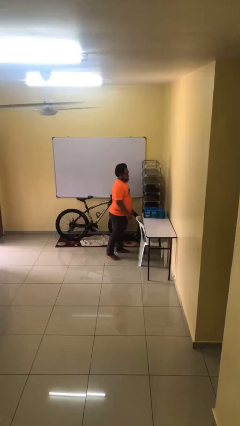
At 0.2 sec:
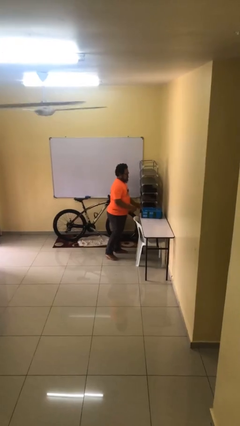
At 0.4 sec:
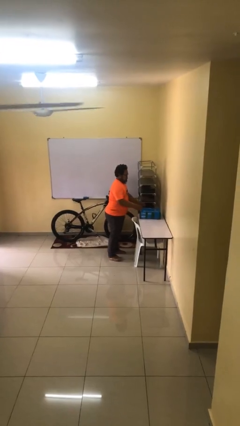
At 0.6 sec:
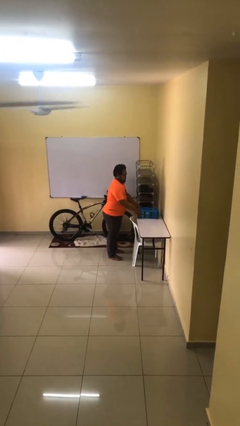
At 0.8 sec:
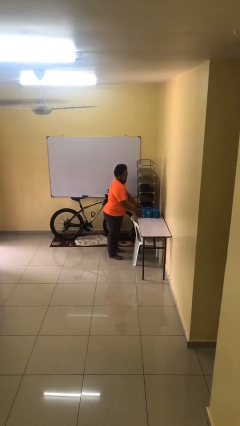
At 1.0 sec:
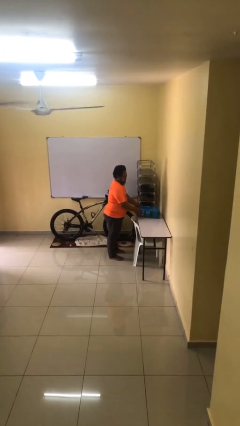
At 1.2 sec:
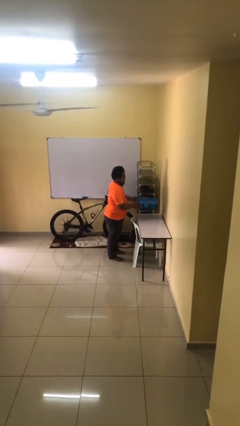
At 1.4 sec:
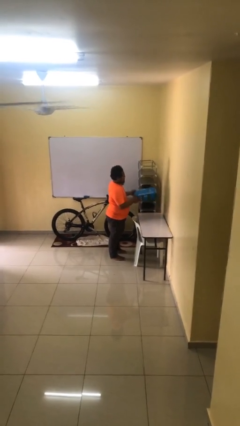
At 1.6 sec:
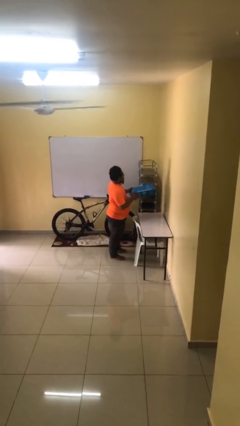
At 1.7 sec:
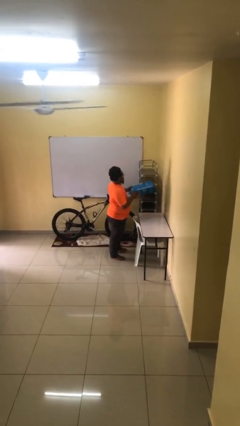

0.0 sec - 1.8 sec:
person picks up object from table

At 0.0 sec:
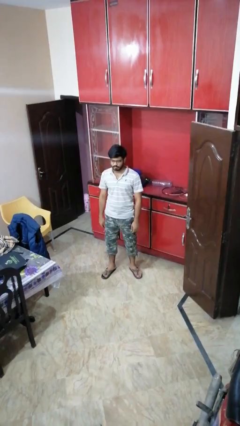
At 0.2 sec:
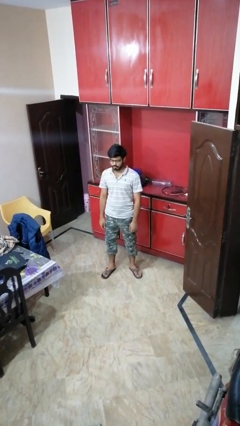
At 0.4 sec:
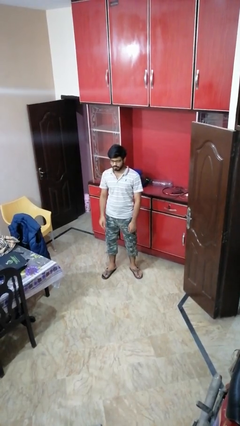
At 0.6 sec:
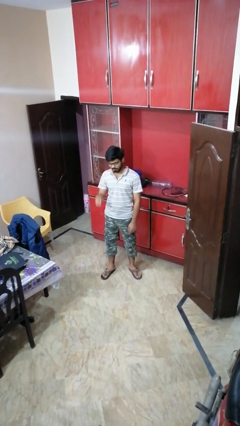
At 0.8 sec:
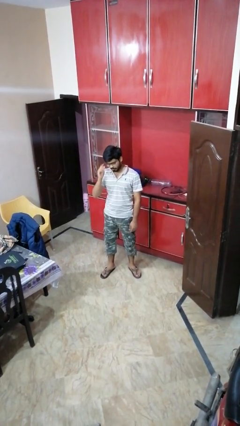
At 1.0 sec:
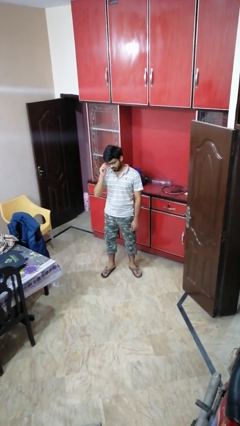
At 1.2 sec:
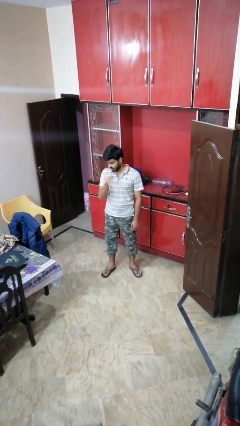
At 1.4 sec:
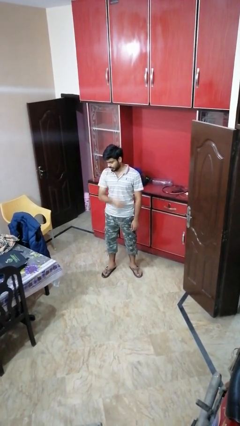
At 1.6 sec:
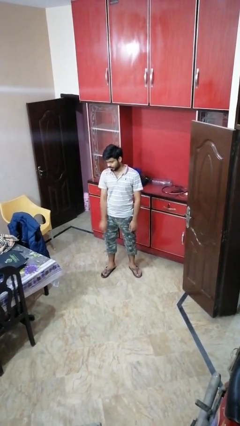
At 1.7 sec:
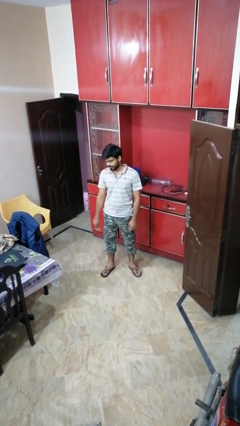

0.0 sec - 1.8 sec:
person takes off glasses

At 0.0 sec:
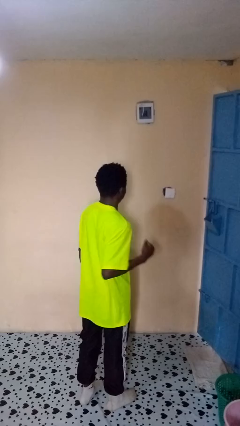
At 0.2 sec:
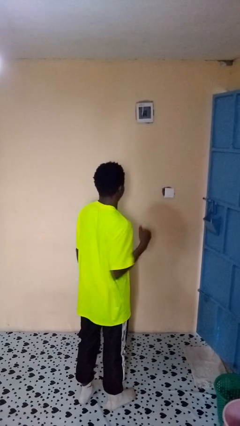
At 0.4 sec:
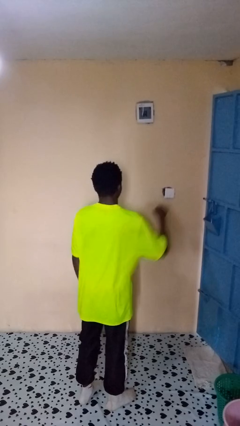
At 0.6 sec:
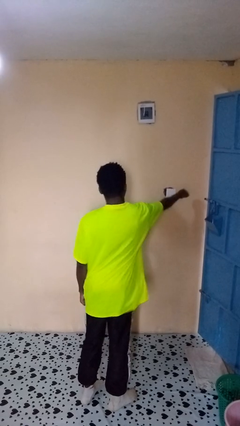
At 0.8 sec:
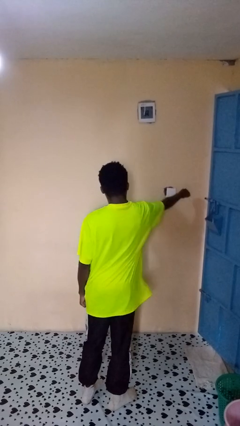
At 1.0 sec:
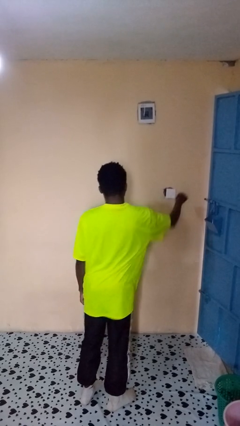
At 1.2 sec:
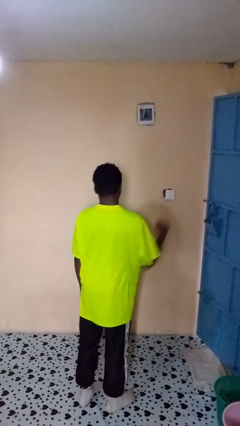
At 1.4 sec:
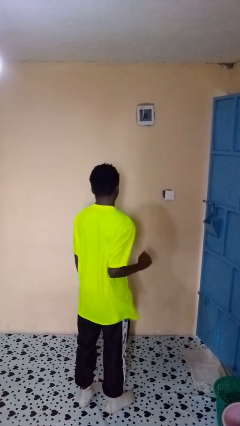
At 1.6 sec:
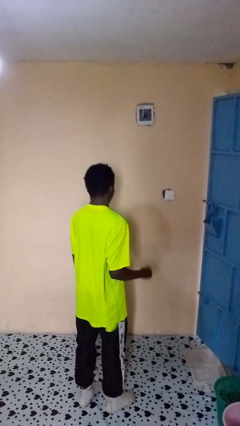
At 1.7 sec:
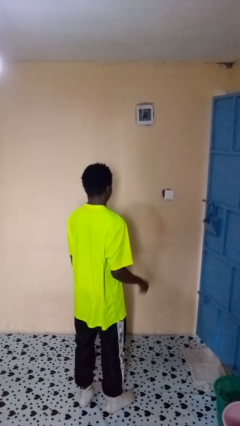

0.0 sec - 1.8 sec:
person karate chop

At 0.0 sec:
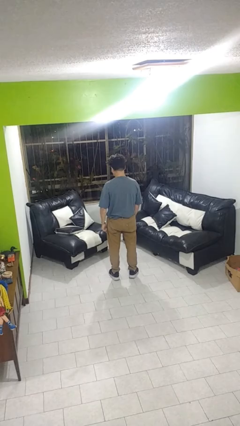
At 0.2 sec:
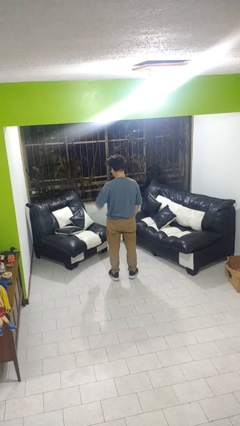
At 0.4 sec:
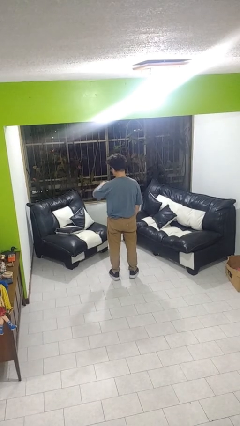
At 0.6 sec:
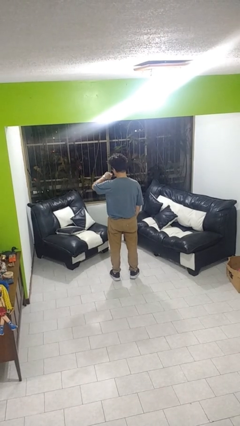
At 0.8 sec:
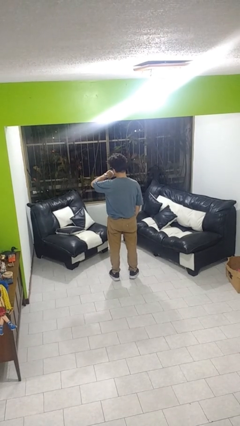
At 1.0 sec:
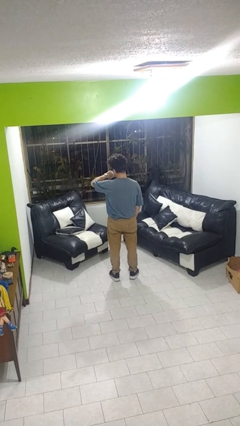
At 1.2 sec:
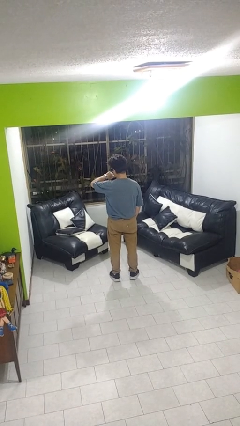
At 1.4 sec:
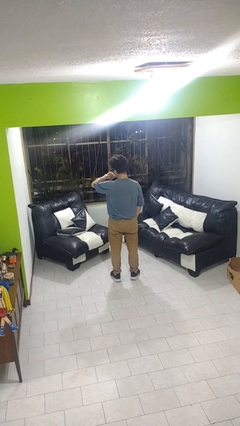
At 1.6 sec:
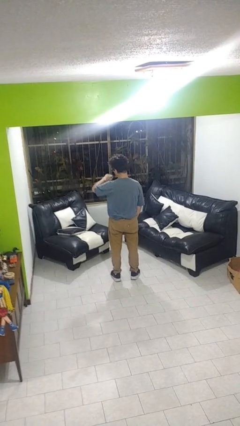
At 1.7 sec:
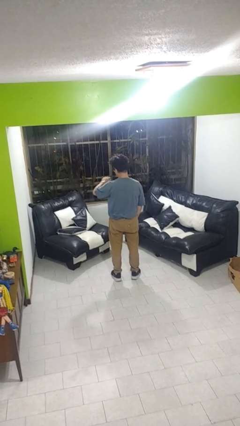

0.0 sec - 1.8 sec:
person looks at wristwatch

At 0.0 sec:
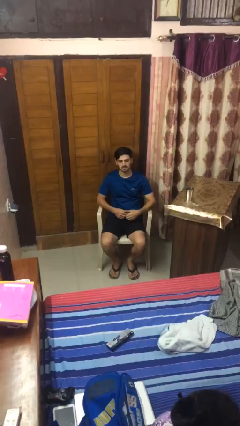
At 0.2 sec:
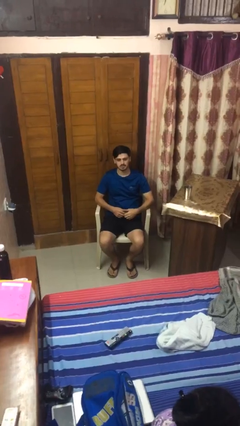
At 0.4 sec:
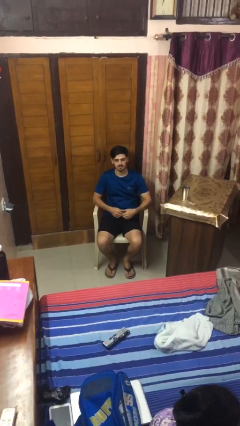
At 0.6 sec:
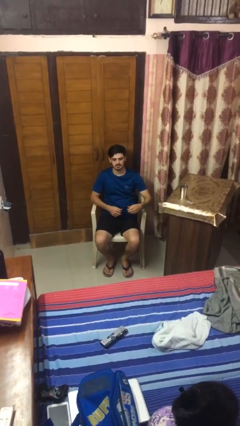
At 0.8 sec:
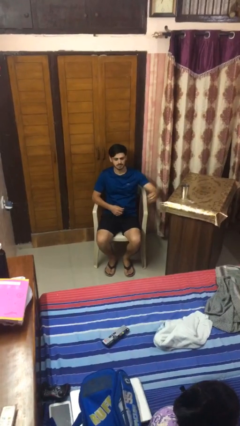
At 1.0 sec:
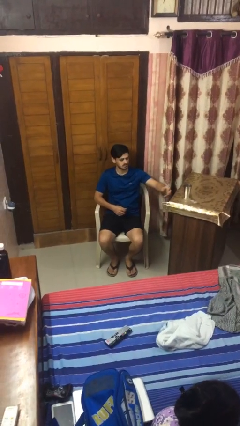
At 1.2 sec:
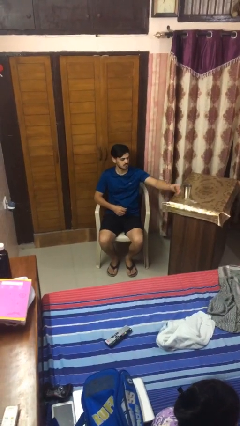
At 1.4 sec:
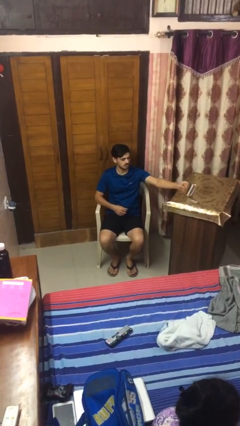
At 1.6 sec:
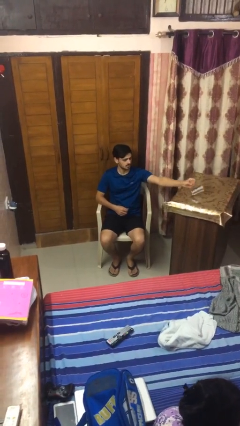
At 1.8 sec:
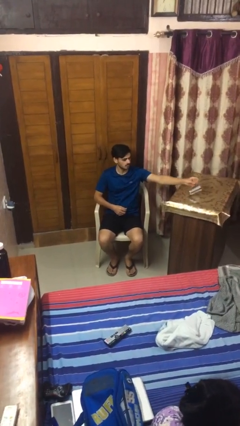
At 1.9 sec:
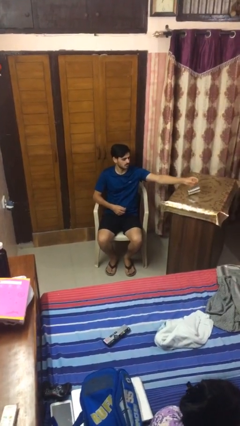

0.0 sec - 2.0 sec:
person knocks over glass

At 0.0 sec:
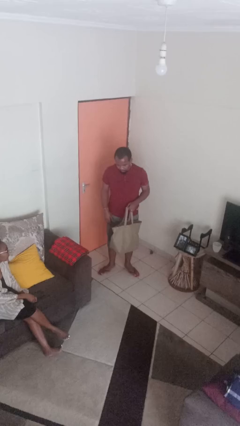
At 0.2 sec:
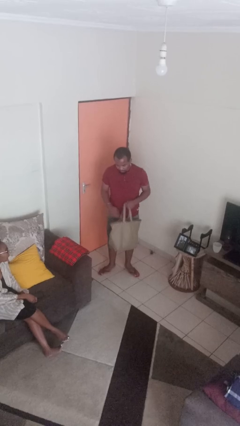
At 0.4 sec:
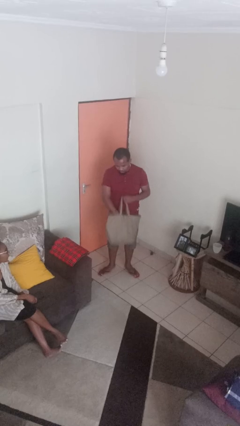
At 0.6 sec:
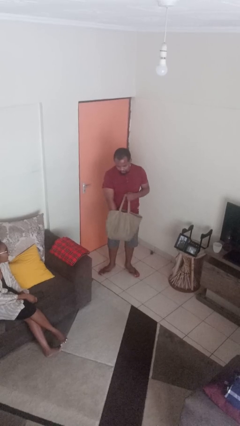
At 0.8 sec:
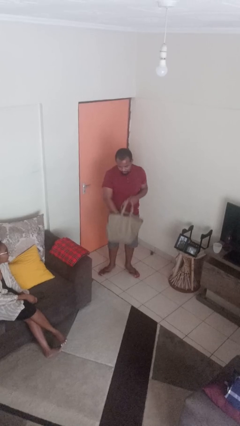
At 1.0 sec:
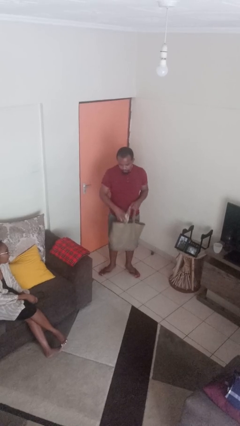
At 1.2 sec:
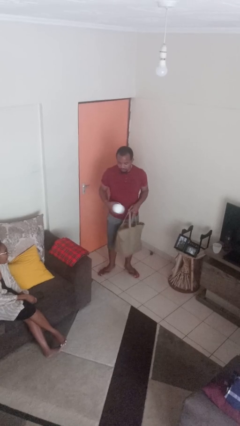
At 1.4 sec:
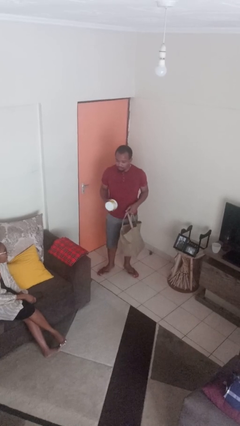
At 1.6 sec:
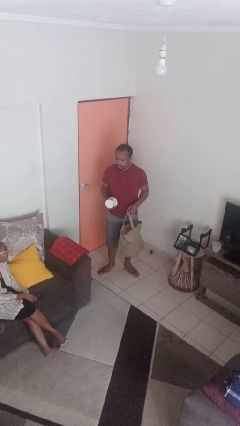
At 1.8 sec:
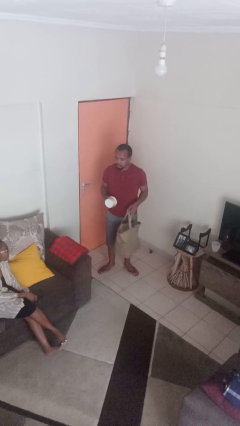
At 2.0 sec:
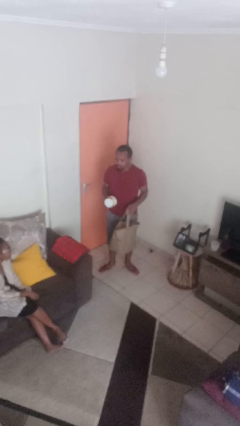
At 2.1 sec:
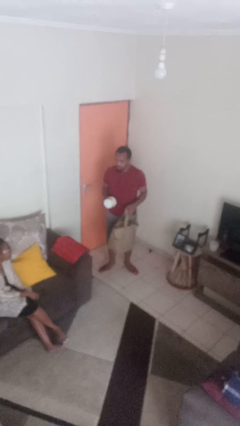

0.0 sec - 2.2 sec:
person takes object from bag

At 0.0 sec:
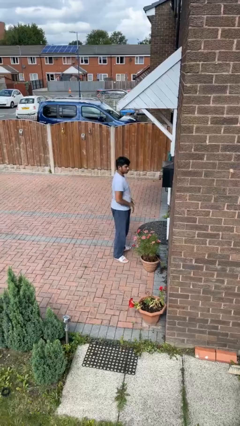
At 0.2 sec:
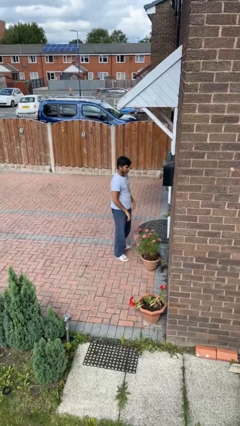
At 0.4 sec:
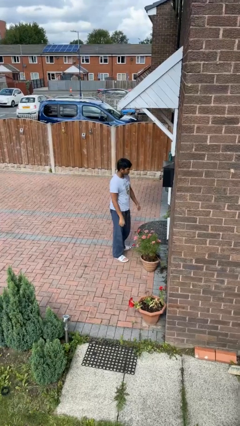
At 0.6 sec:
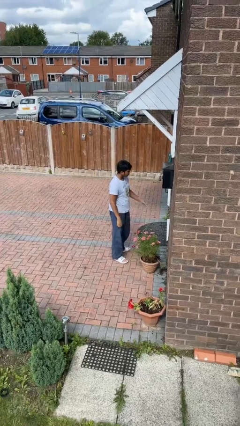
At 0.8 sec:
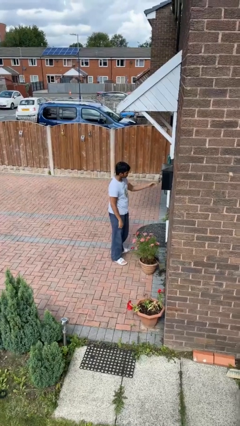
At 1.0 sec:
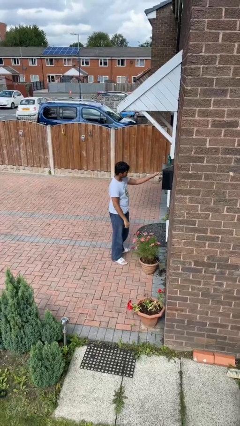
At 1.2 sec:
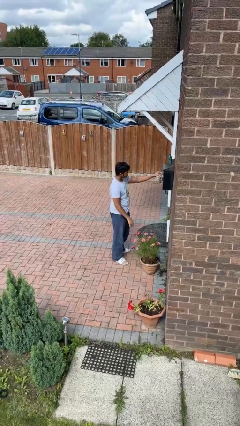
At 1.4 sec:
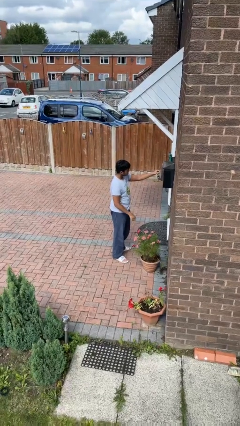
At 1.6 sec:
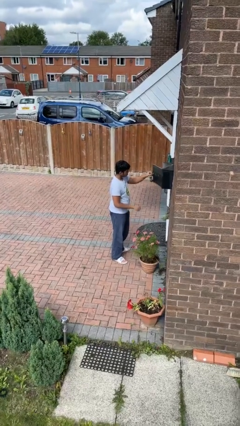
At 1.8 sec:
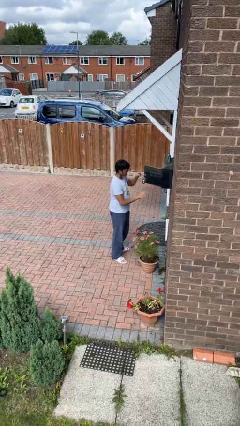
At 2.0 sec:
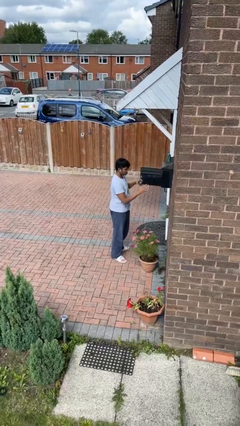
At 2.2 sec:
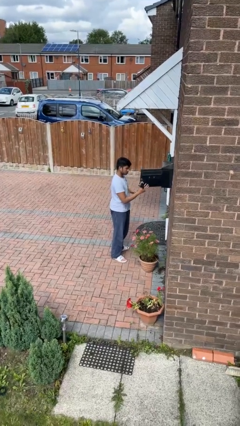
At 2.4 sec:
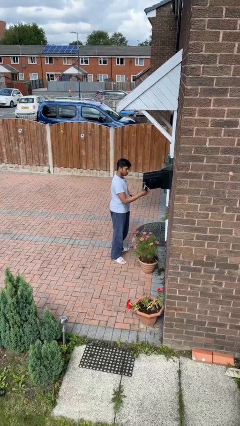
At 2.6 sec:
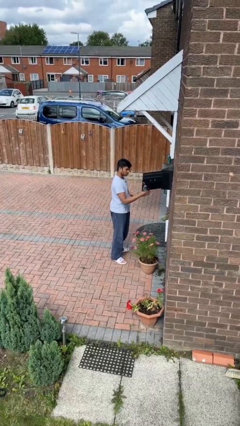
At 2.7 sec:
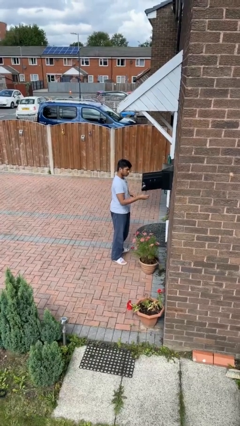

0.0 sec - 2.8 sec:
person opens mailbox

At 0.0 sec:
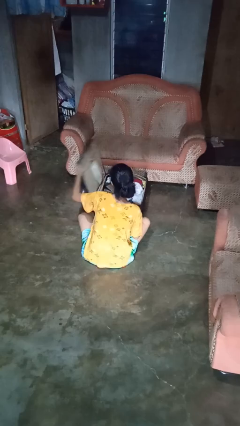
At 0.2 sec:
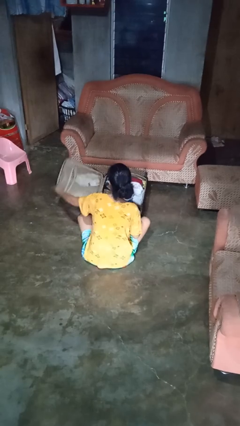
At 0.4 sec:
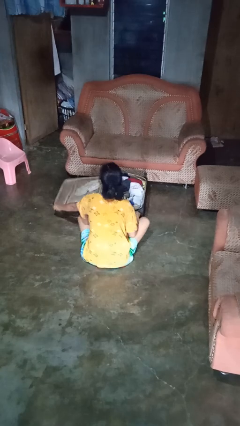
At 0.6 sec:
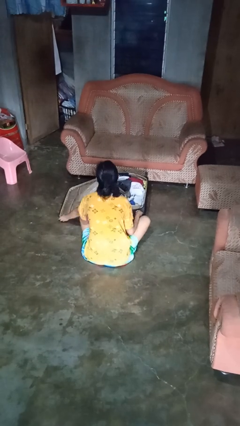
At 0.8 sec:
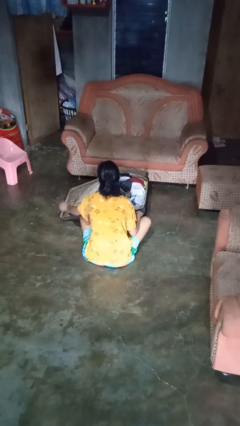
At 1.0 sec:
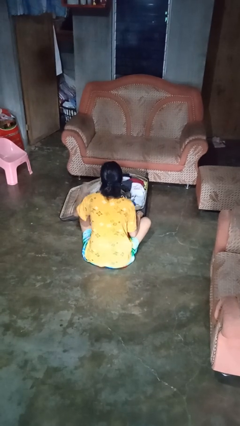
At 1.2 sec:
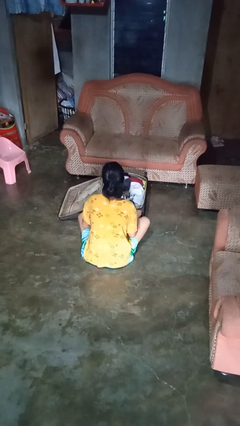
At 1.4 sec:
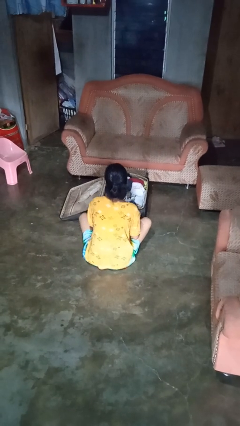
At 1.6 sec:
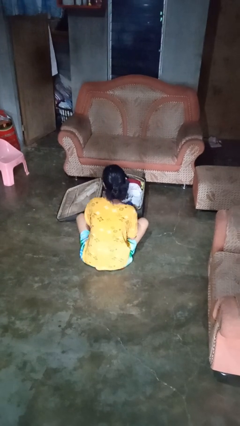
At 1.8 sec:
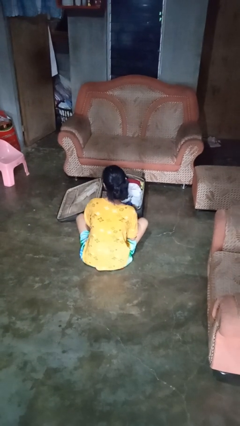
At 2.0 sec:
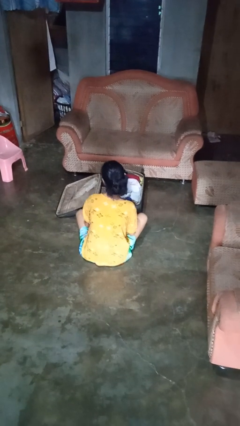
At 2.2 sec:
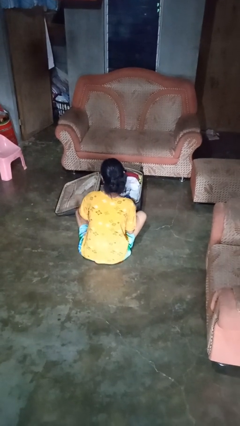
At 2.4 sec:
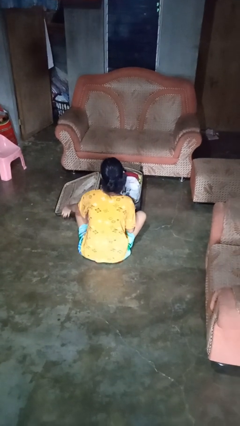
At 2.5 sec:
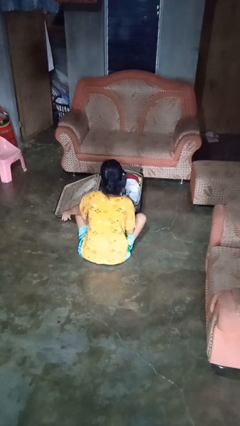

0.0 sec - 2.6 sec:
person opens suitcase
